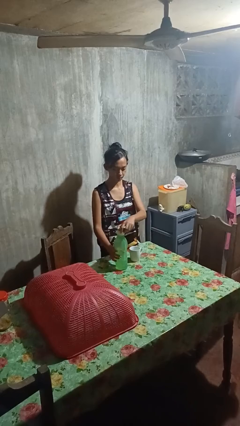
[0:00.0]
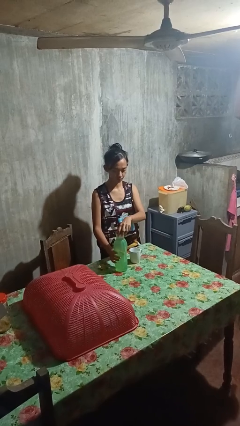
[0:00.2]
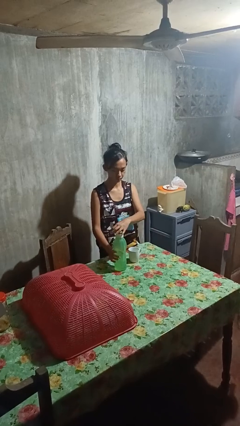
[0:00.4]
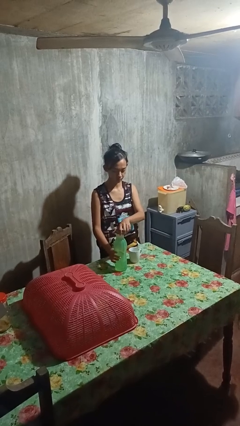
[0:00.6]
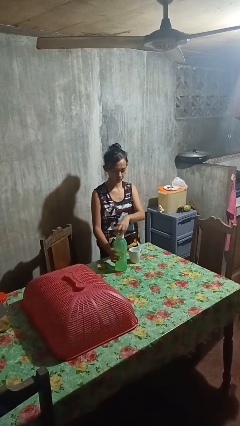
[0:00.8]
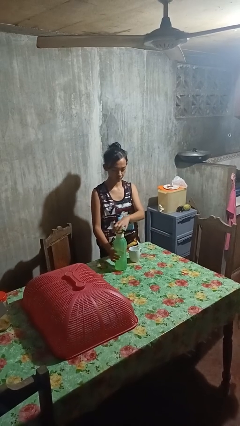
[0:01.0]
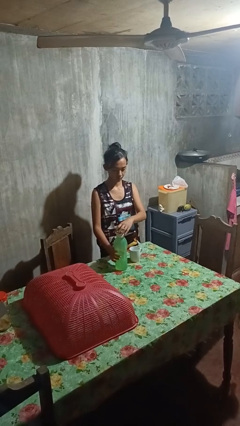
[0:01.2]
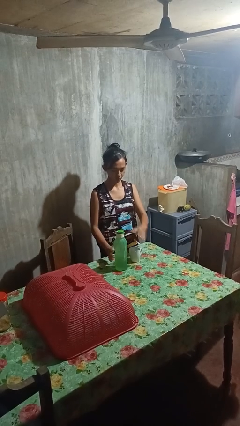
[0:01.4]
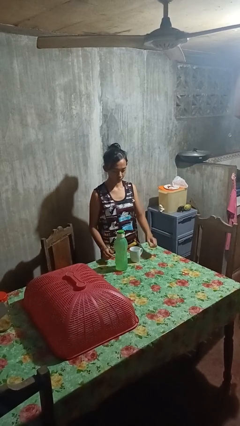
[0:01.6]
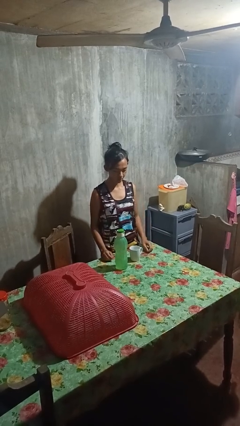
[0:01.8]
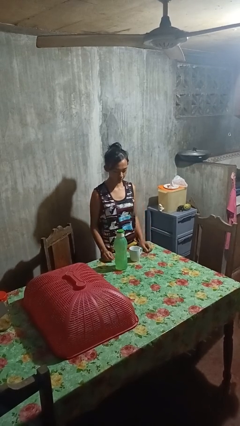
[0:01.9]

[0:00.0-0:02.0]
person screws lid to bottle

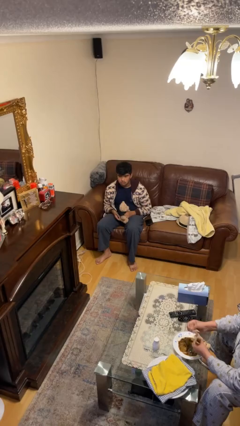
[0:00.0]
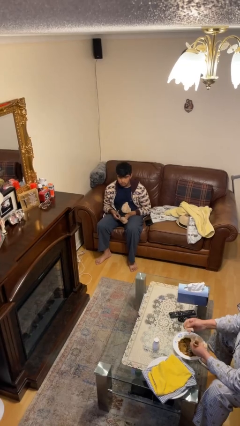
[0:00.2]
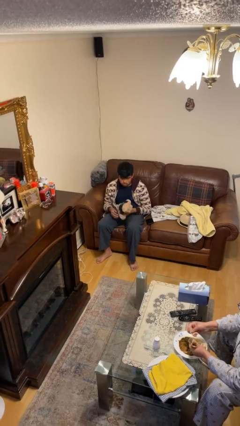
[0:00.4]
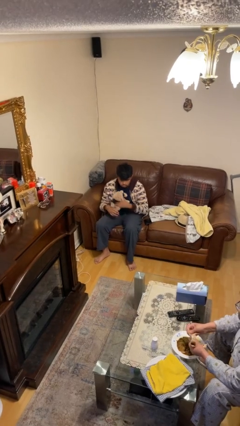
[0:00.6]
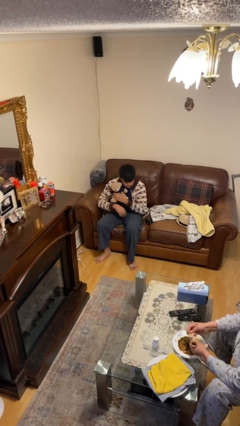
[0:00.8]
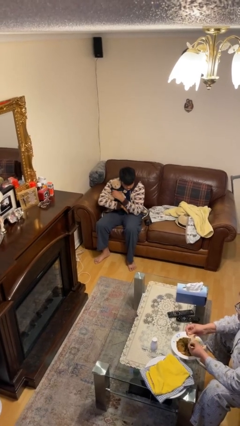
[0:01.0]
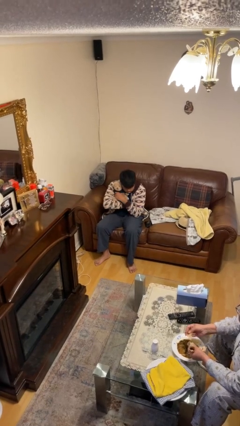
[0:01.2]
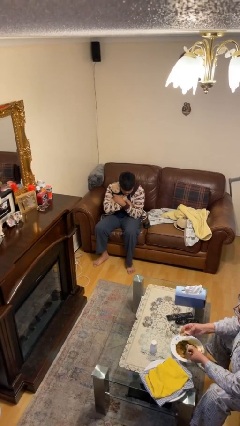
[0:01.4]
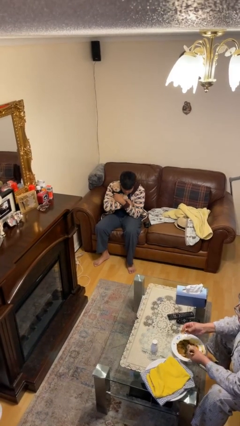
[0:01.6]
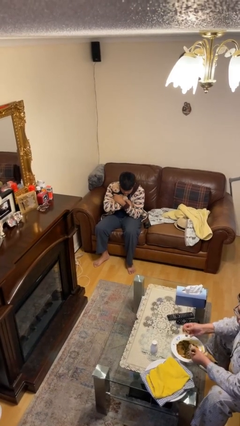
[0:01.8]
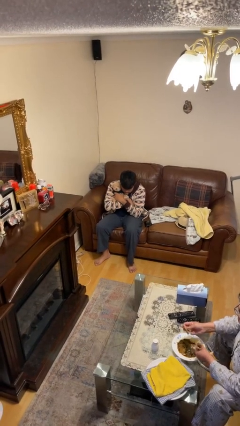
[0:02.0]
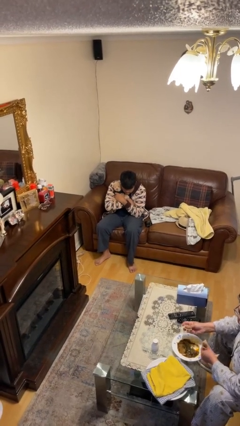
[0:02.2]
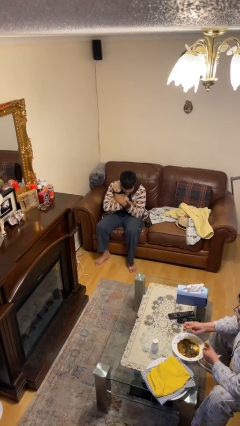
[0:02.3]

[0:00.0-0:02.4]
person hugs stuffed animal

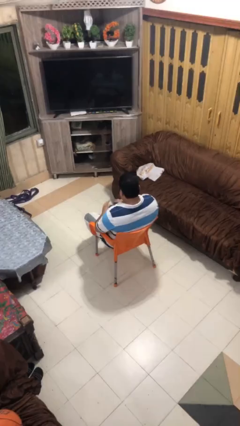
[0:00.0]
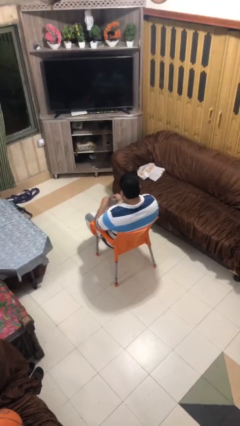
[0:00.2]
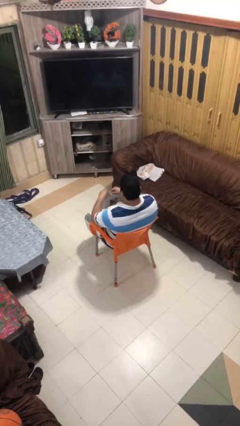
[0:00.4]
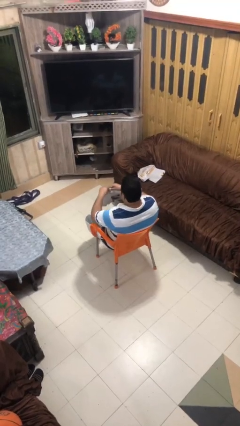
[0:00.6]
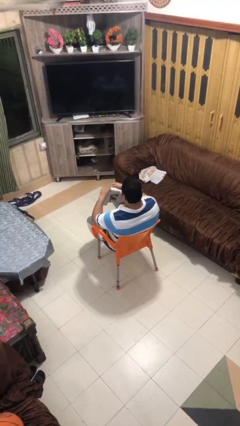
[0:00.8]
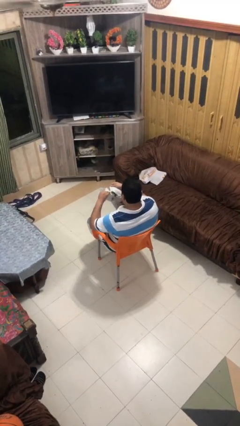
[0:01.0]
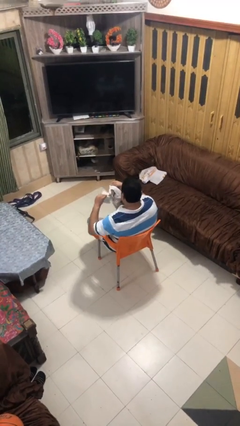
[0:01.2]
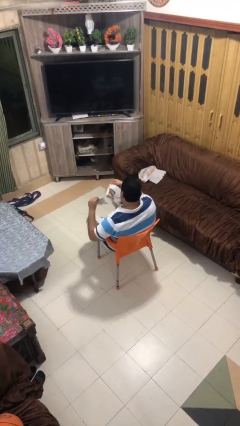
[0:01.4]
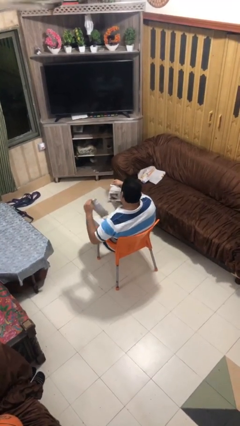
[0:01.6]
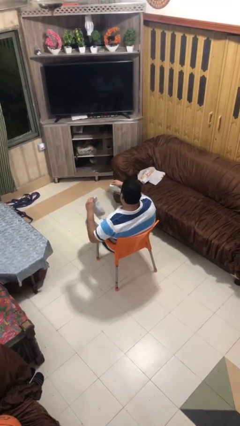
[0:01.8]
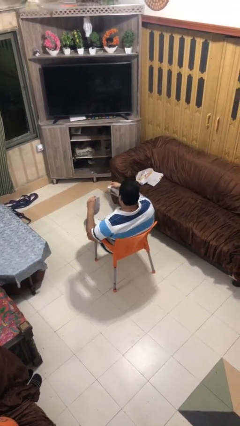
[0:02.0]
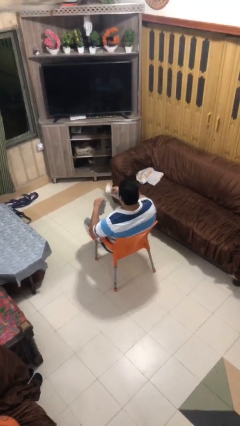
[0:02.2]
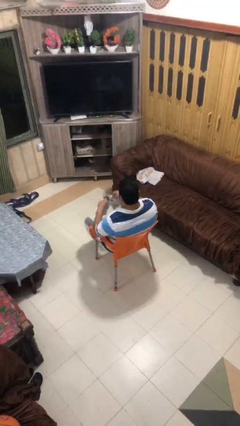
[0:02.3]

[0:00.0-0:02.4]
person tears paper

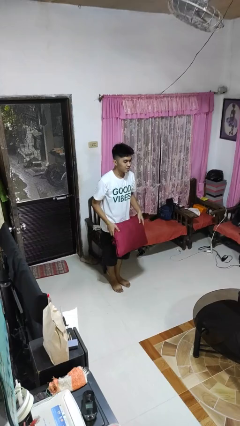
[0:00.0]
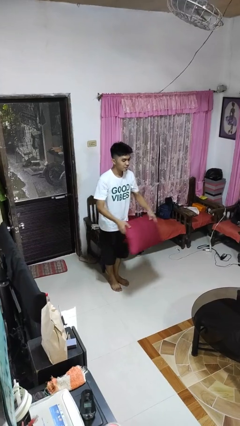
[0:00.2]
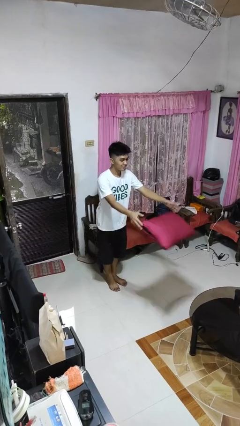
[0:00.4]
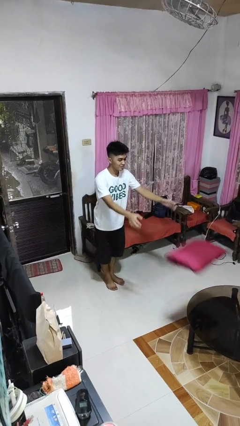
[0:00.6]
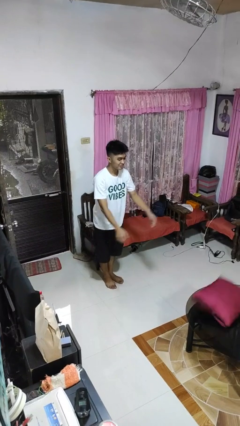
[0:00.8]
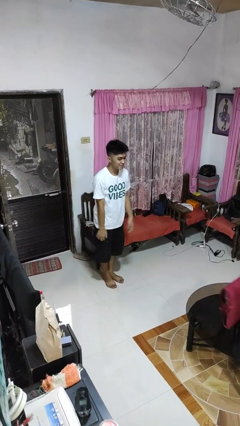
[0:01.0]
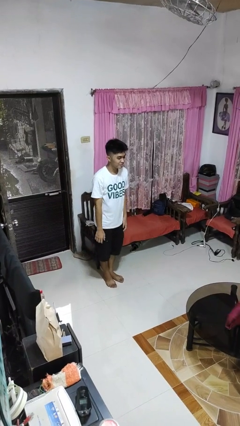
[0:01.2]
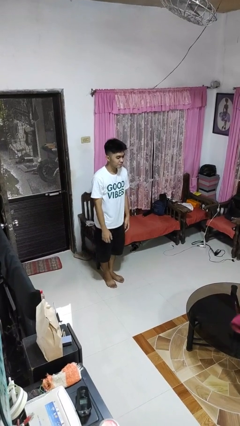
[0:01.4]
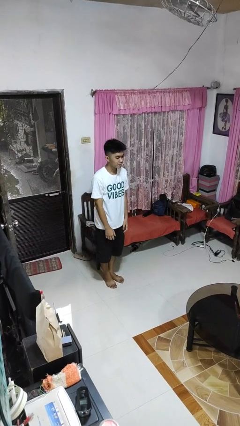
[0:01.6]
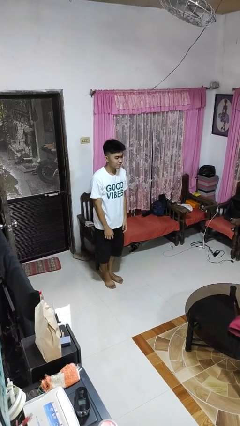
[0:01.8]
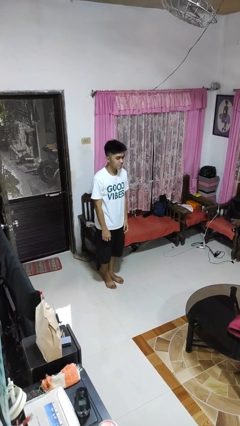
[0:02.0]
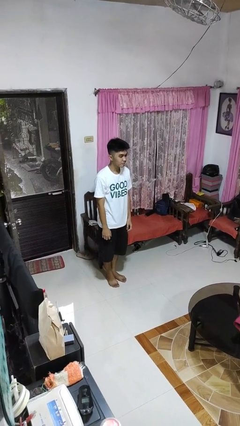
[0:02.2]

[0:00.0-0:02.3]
person throws object on table

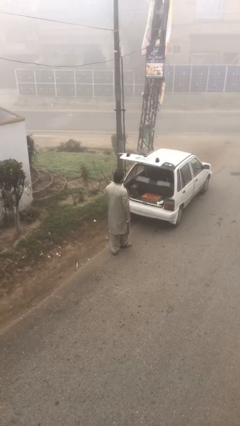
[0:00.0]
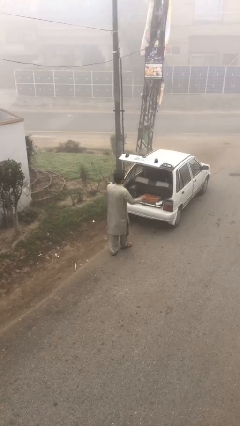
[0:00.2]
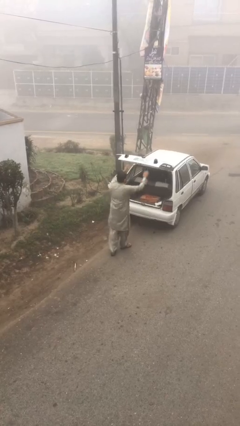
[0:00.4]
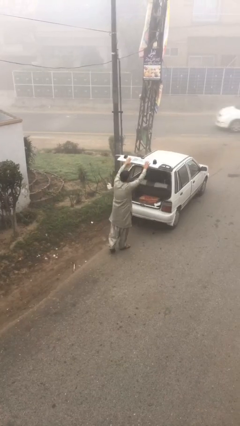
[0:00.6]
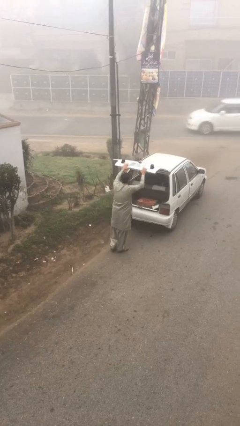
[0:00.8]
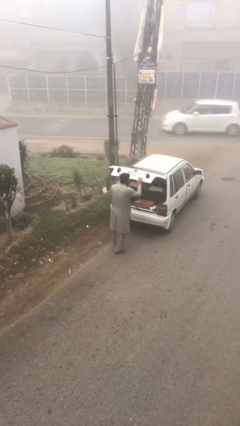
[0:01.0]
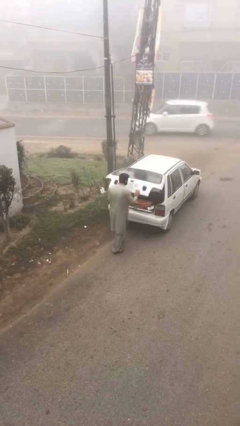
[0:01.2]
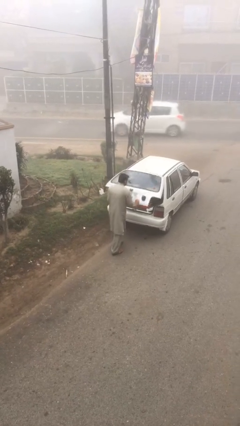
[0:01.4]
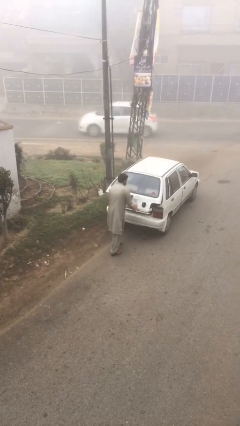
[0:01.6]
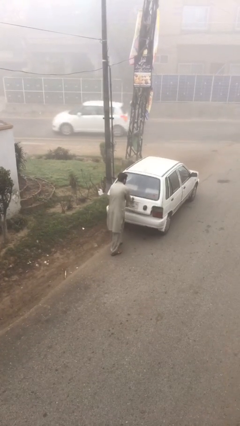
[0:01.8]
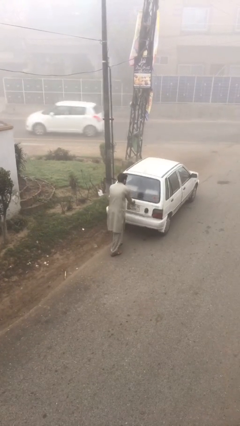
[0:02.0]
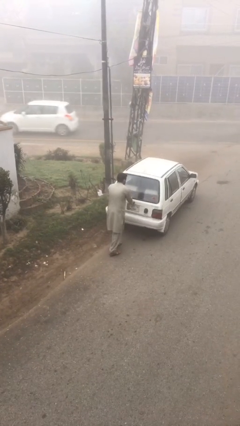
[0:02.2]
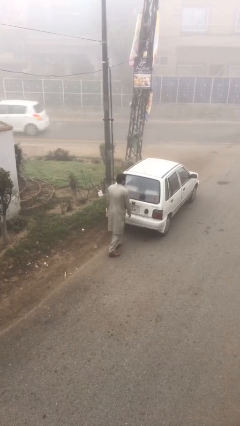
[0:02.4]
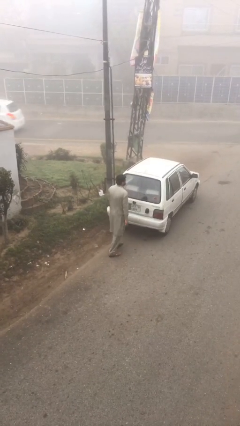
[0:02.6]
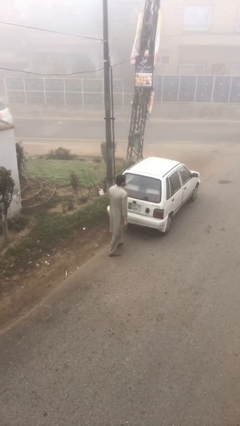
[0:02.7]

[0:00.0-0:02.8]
person closes car trunk

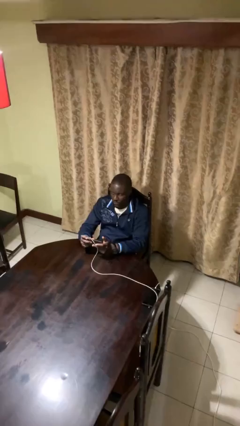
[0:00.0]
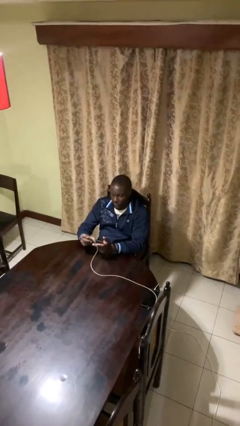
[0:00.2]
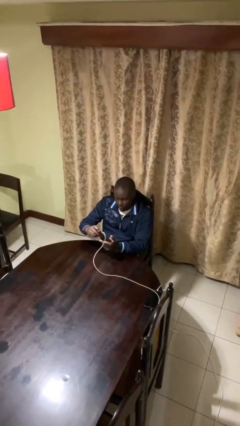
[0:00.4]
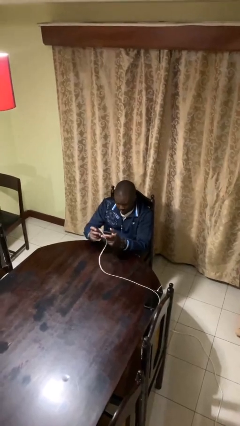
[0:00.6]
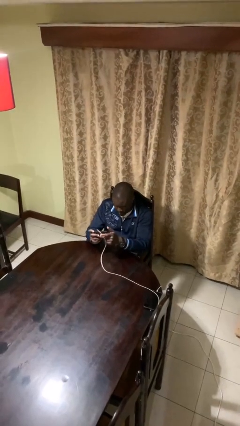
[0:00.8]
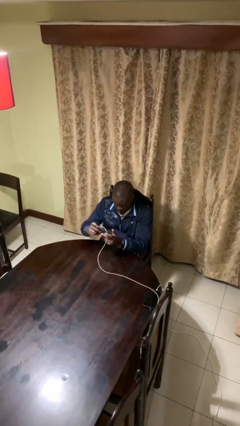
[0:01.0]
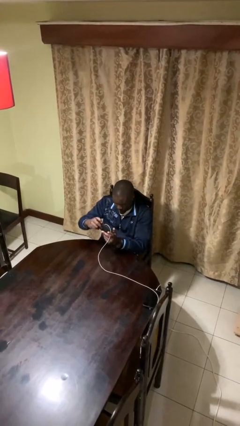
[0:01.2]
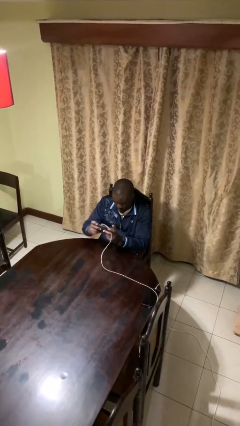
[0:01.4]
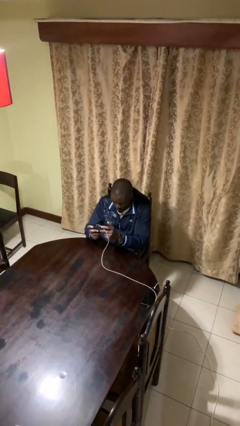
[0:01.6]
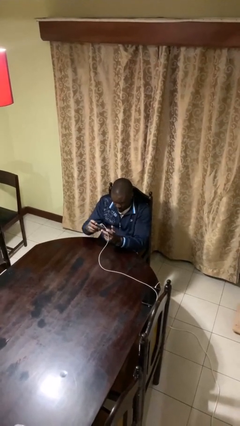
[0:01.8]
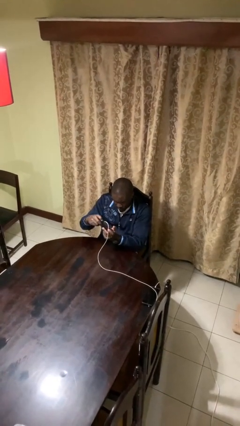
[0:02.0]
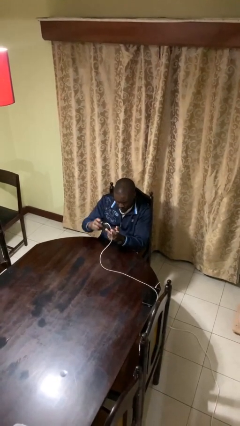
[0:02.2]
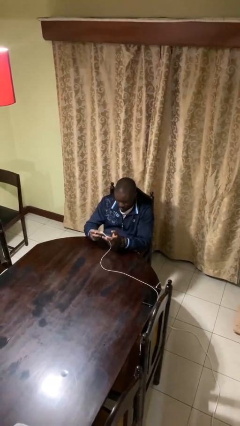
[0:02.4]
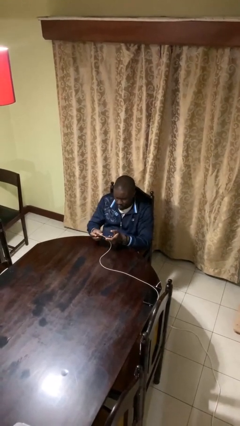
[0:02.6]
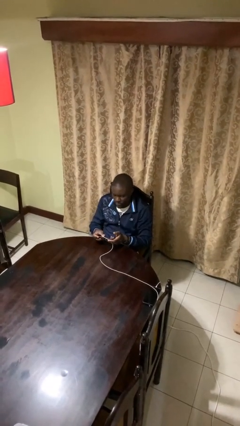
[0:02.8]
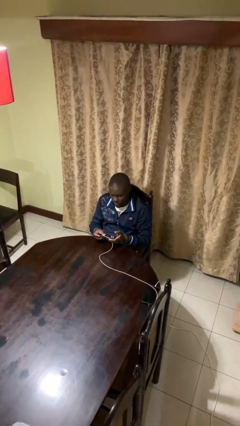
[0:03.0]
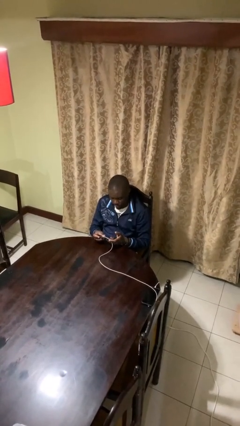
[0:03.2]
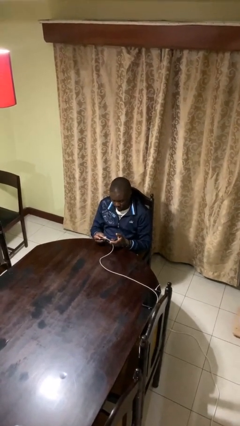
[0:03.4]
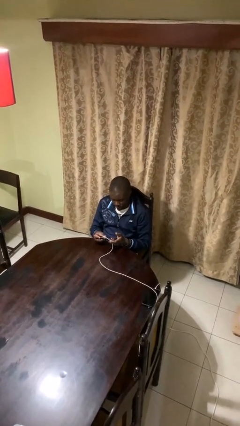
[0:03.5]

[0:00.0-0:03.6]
person interacts with handheld game

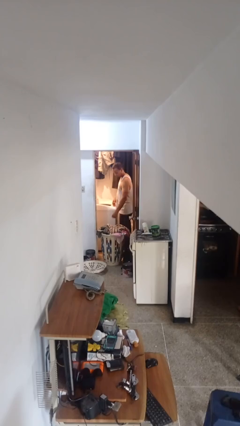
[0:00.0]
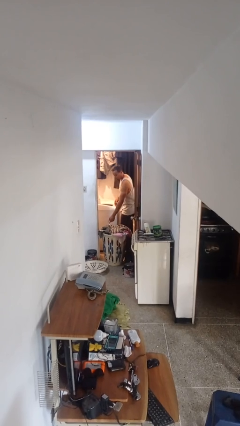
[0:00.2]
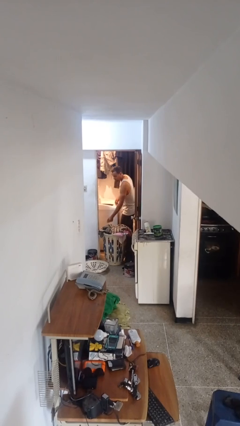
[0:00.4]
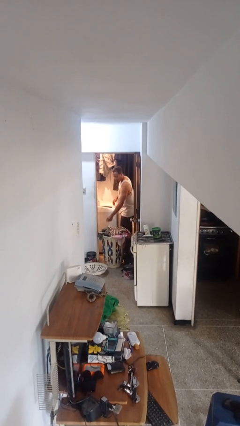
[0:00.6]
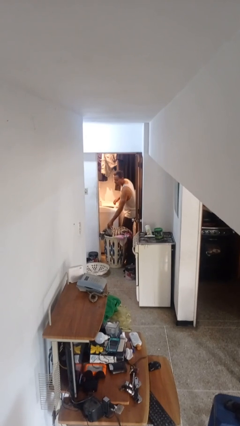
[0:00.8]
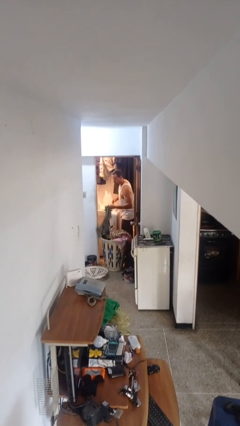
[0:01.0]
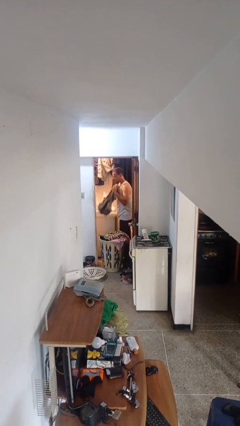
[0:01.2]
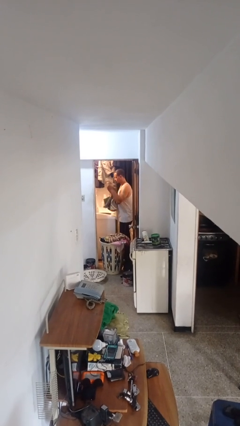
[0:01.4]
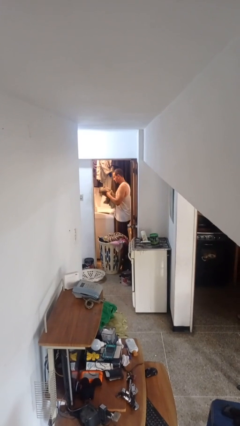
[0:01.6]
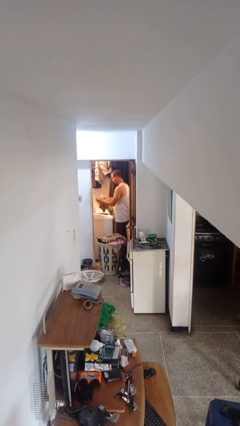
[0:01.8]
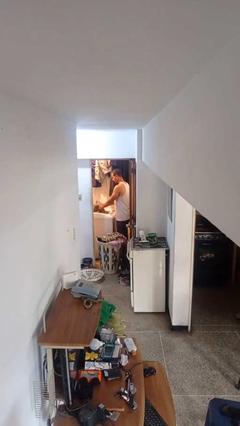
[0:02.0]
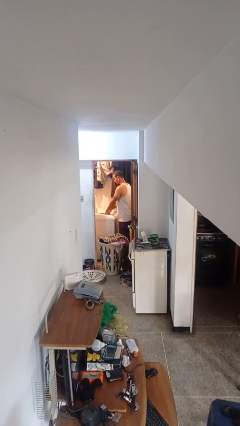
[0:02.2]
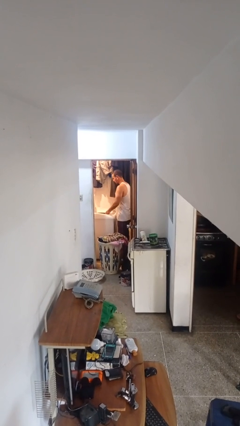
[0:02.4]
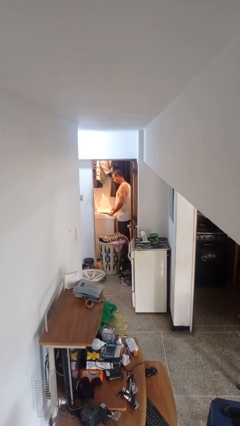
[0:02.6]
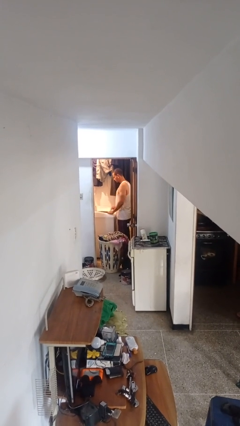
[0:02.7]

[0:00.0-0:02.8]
person loads clotheswasher
